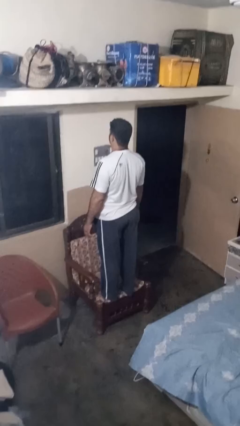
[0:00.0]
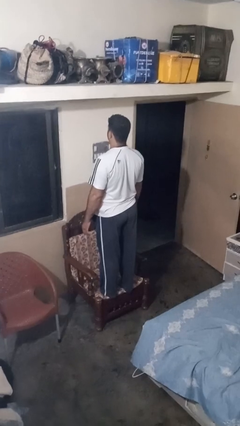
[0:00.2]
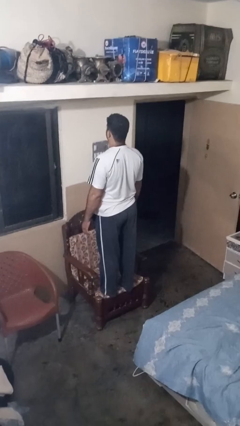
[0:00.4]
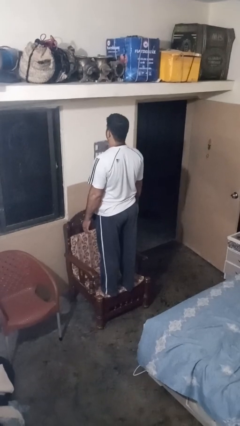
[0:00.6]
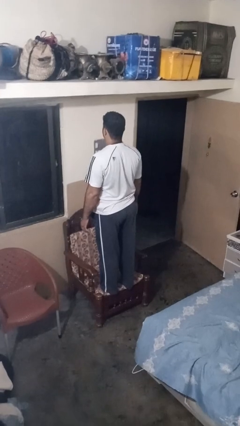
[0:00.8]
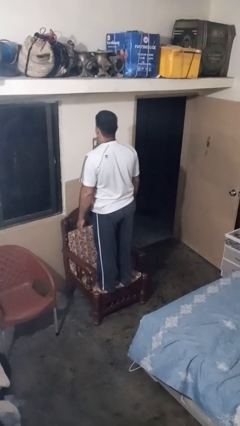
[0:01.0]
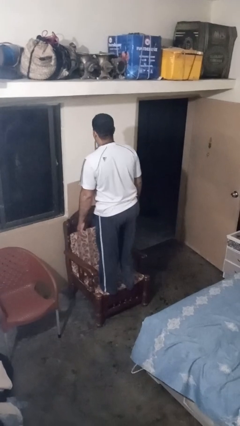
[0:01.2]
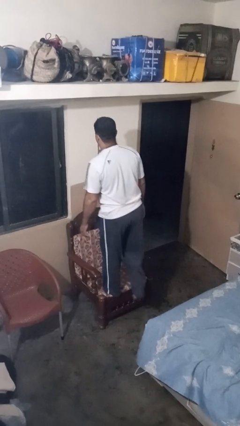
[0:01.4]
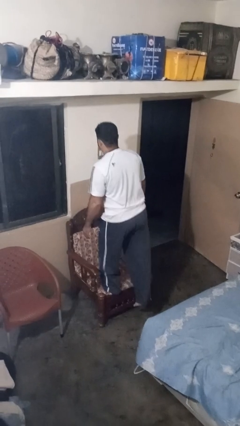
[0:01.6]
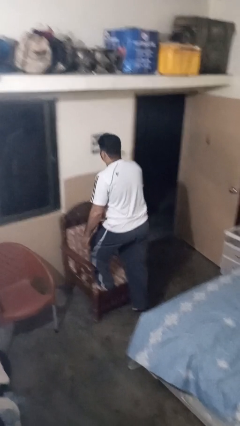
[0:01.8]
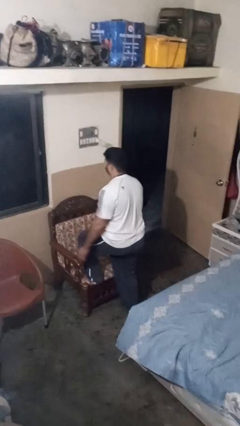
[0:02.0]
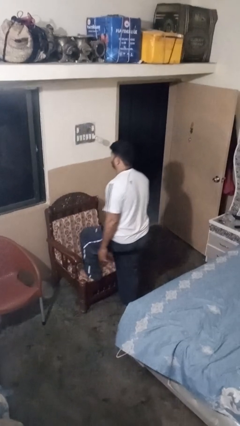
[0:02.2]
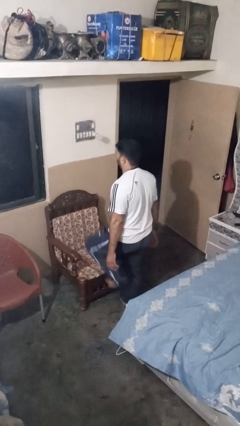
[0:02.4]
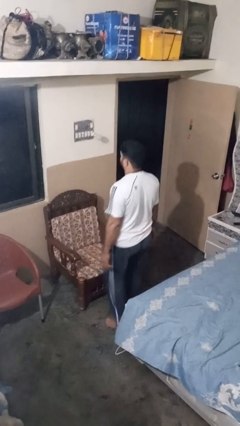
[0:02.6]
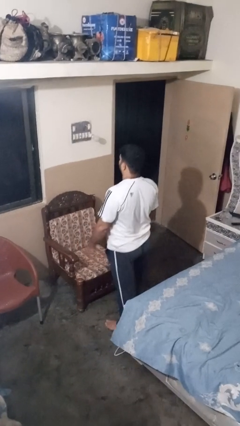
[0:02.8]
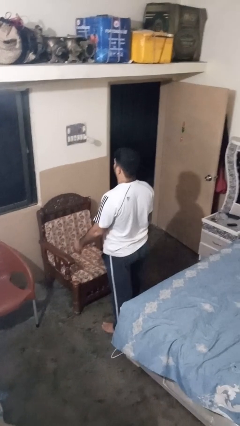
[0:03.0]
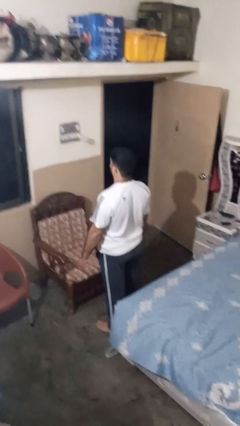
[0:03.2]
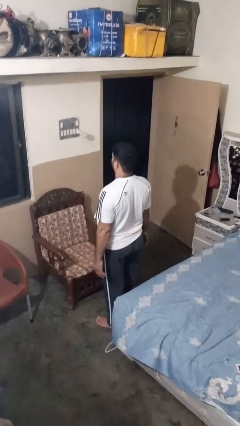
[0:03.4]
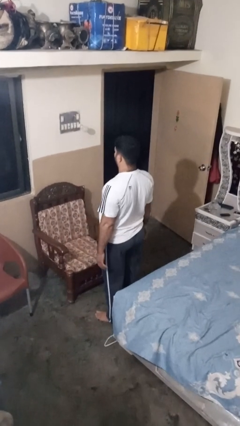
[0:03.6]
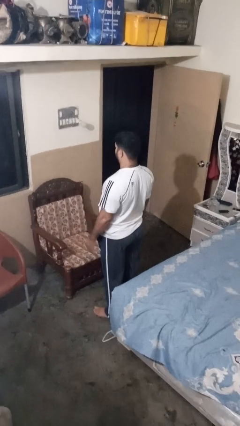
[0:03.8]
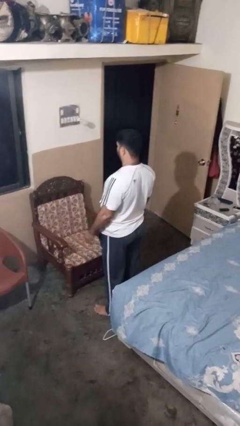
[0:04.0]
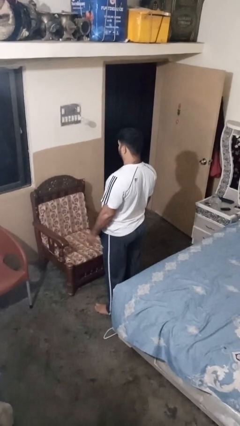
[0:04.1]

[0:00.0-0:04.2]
person climbs off couch

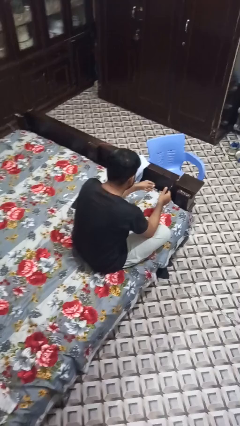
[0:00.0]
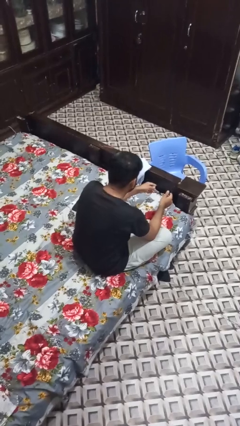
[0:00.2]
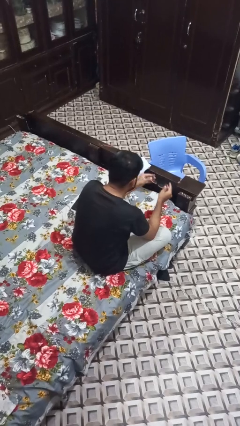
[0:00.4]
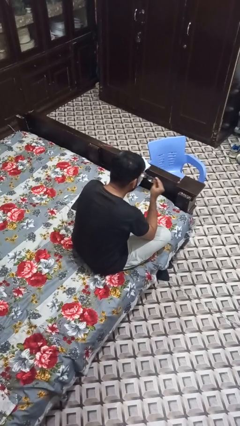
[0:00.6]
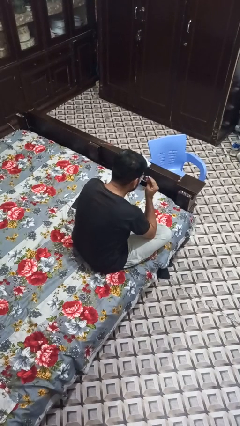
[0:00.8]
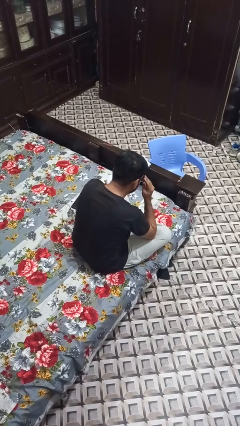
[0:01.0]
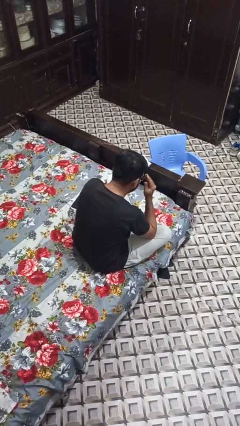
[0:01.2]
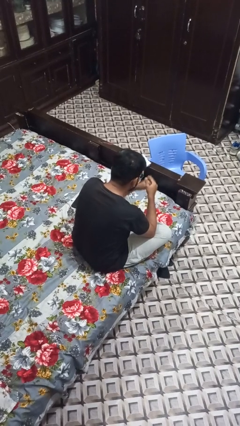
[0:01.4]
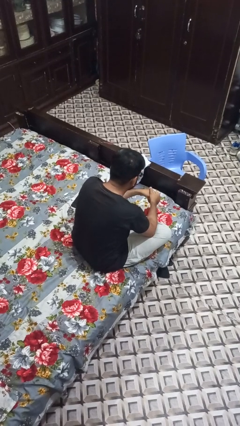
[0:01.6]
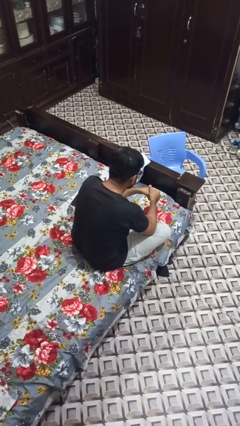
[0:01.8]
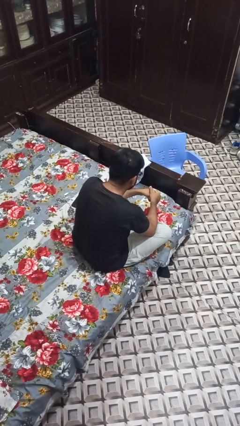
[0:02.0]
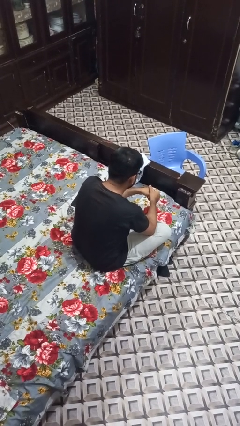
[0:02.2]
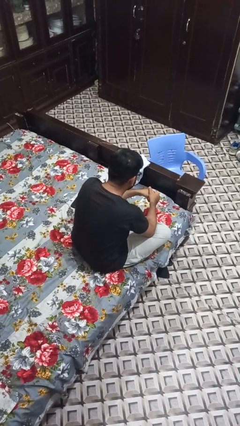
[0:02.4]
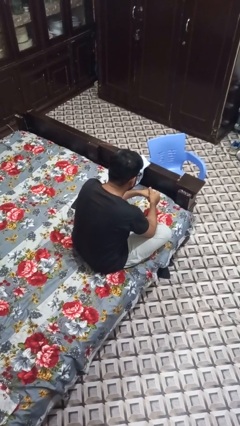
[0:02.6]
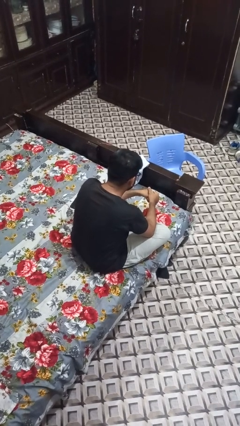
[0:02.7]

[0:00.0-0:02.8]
person puts on glasses

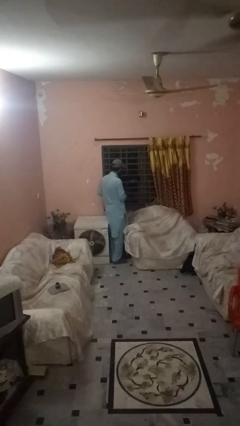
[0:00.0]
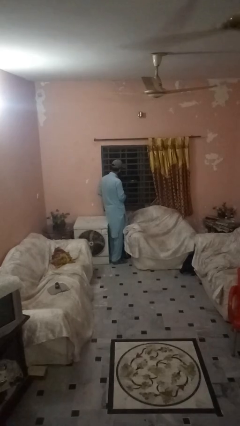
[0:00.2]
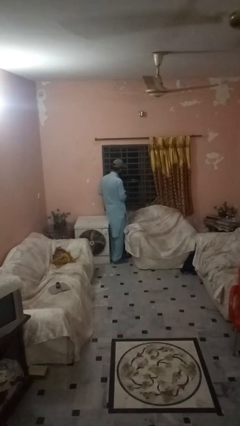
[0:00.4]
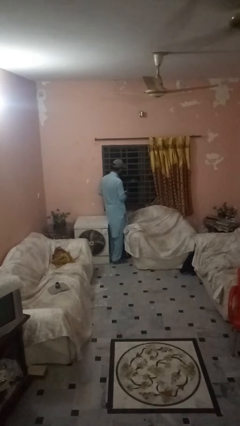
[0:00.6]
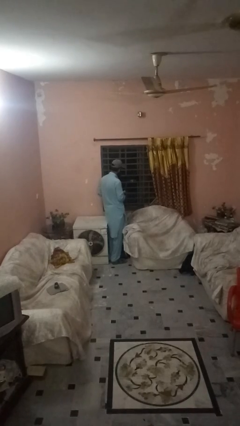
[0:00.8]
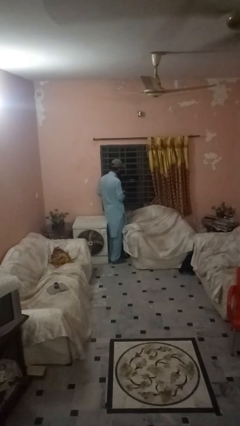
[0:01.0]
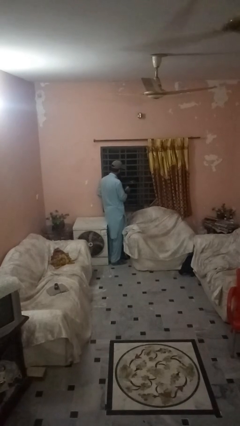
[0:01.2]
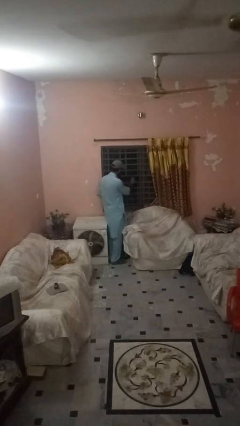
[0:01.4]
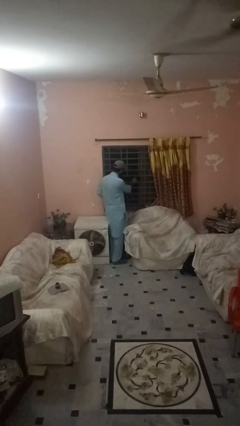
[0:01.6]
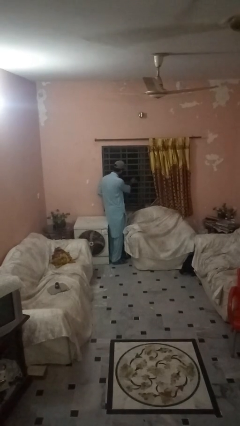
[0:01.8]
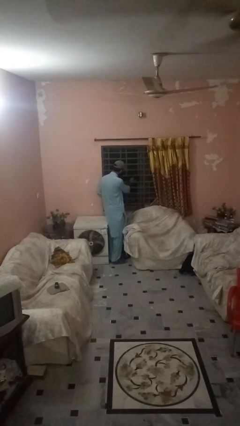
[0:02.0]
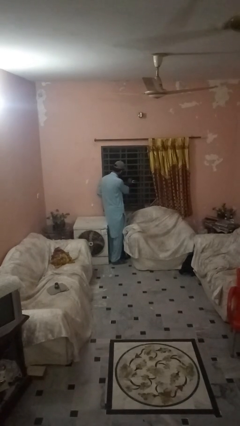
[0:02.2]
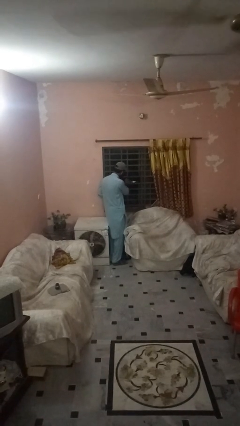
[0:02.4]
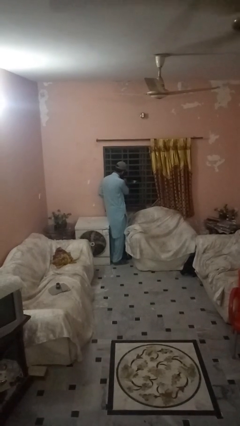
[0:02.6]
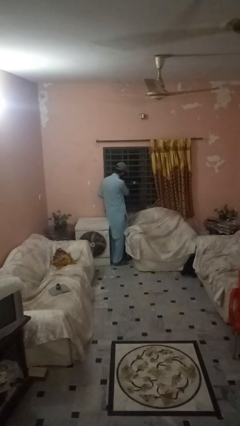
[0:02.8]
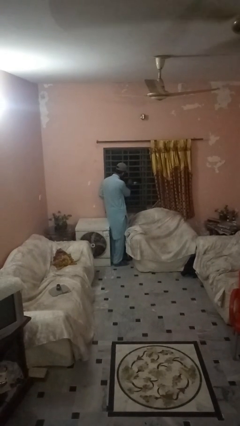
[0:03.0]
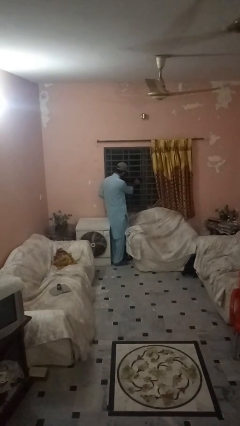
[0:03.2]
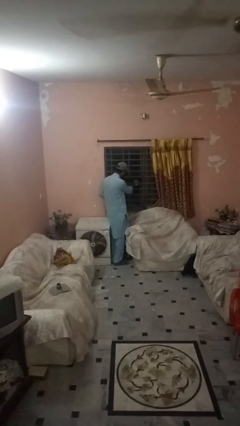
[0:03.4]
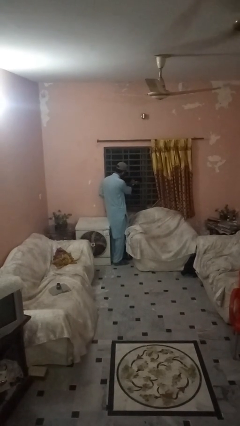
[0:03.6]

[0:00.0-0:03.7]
person washes window

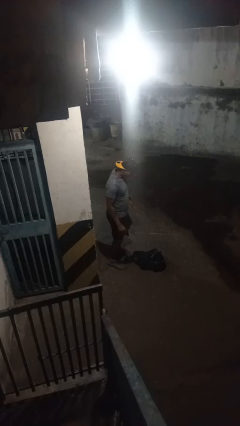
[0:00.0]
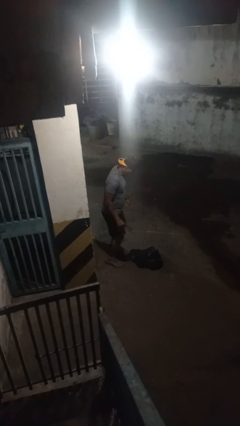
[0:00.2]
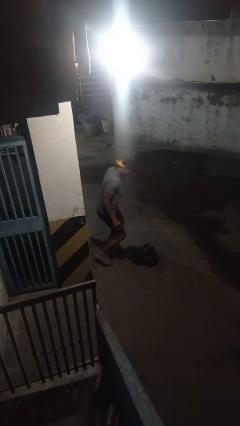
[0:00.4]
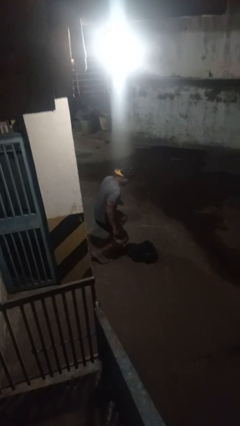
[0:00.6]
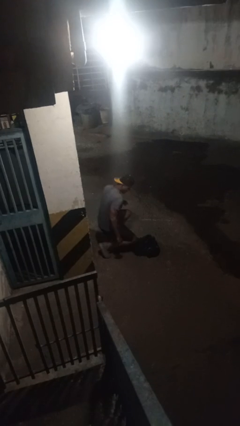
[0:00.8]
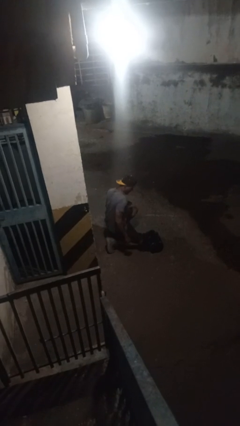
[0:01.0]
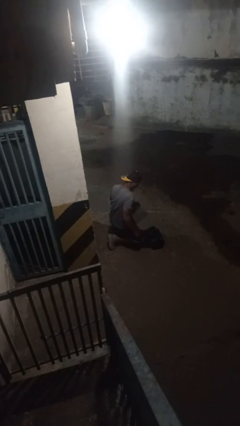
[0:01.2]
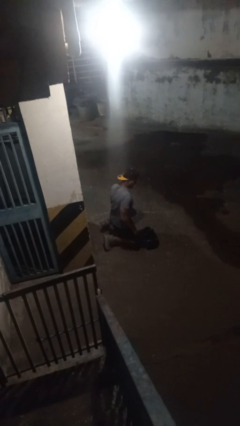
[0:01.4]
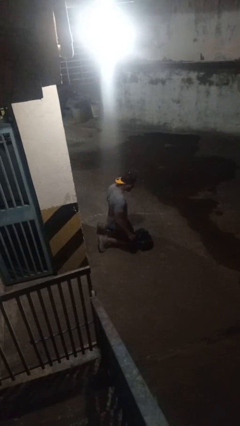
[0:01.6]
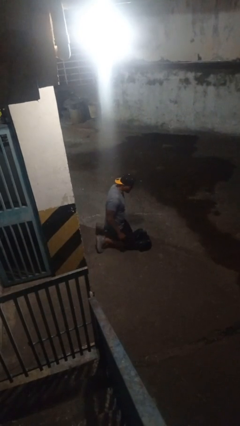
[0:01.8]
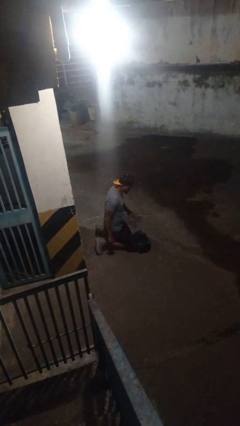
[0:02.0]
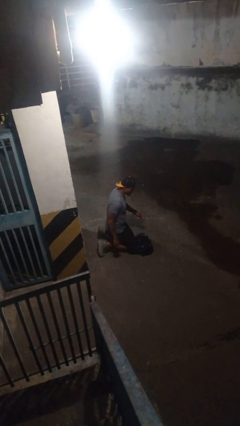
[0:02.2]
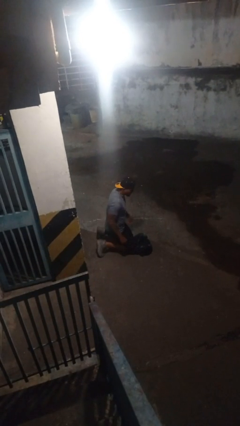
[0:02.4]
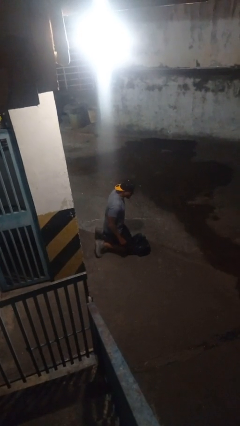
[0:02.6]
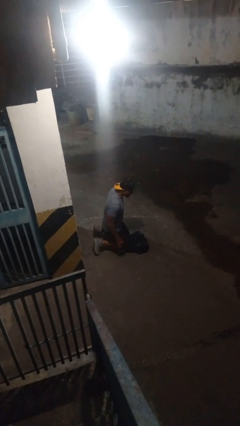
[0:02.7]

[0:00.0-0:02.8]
person kneels

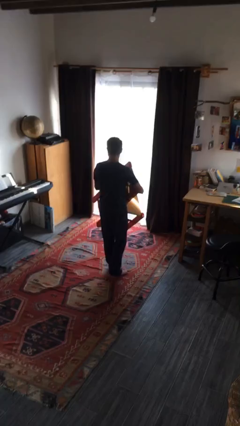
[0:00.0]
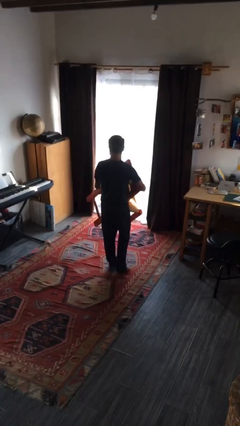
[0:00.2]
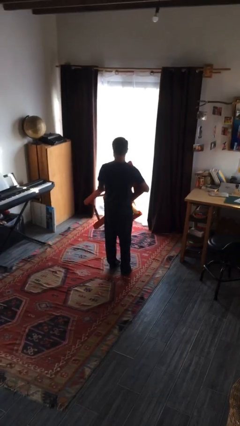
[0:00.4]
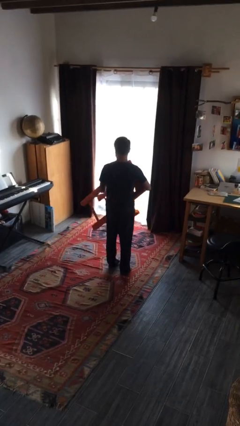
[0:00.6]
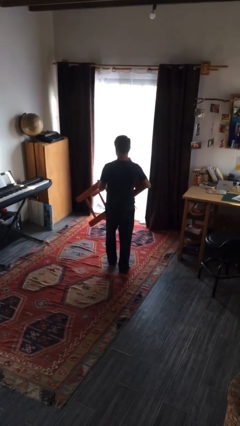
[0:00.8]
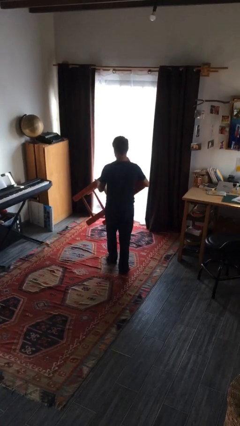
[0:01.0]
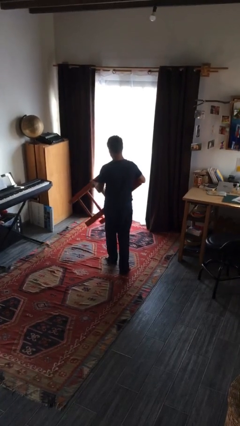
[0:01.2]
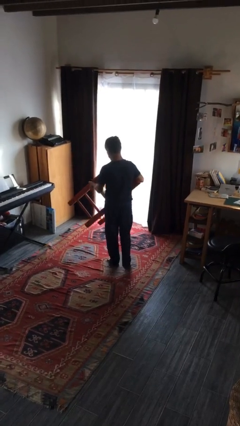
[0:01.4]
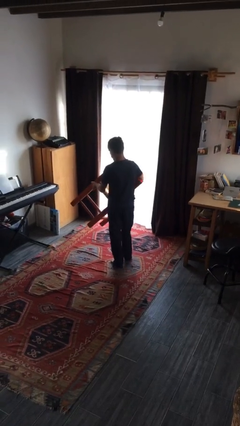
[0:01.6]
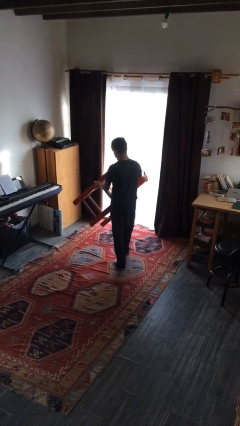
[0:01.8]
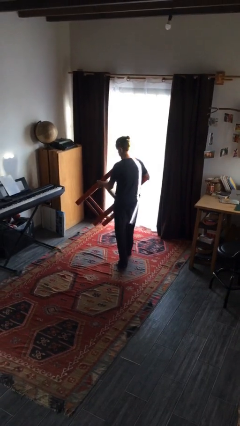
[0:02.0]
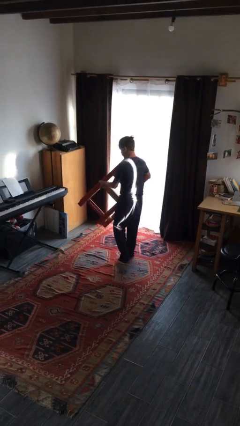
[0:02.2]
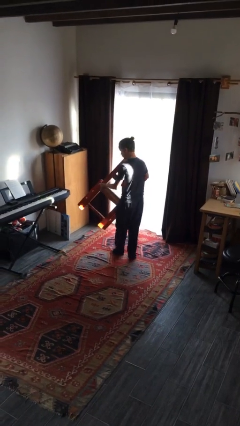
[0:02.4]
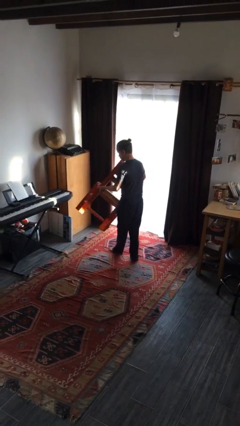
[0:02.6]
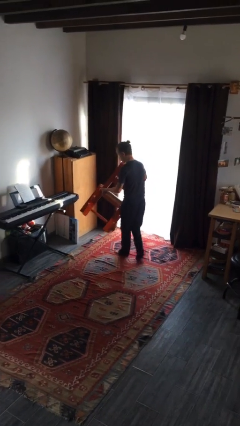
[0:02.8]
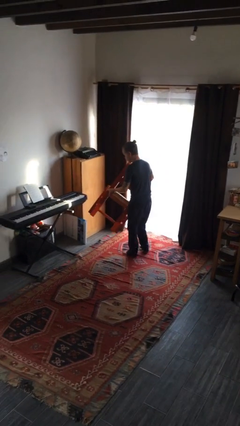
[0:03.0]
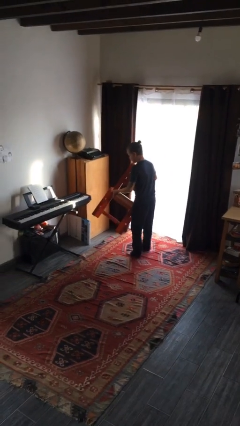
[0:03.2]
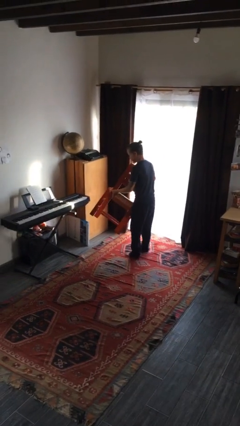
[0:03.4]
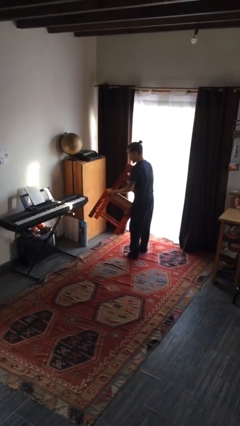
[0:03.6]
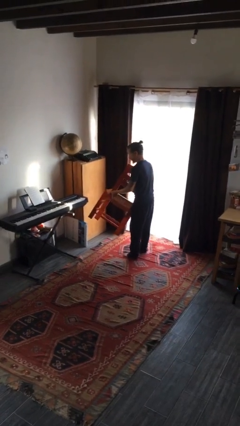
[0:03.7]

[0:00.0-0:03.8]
person carries furniture

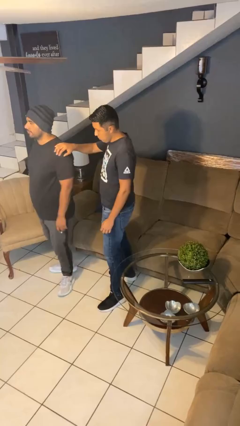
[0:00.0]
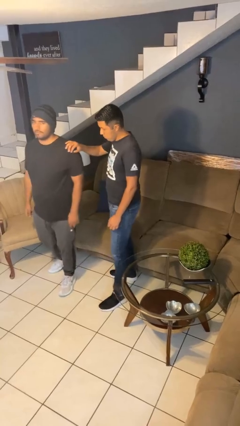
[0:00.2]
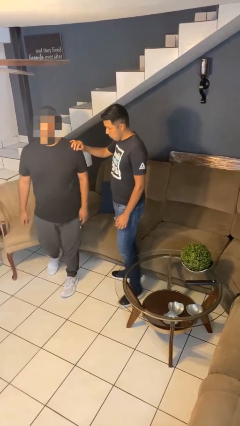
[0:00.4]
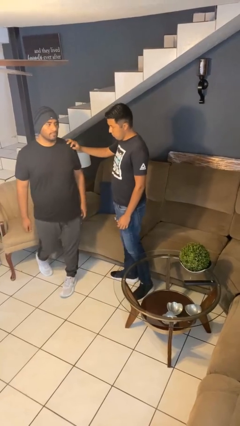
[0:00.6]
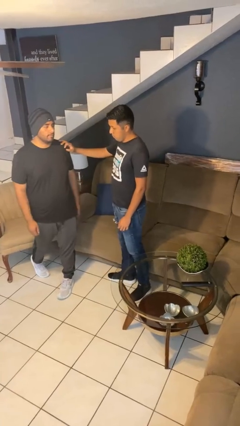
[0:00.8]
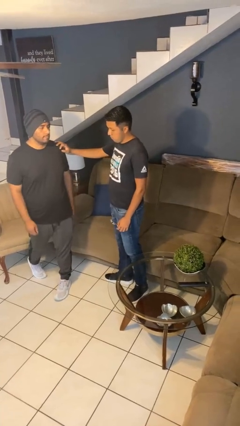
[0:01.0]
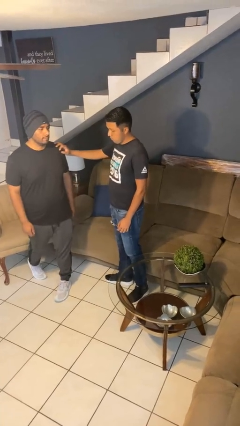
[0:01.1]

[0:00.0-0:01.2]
person spins person around
